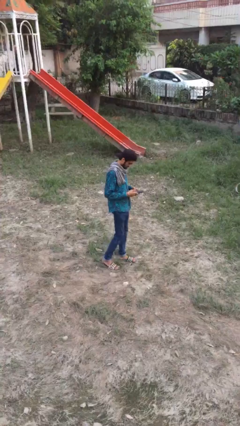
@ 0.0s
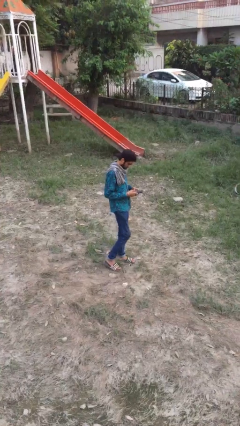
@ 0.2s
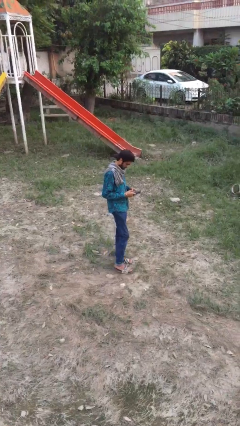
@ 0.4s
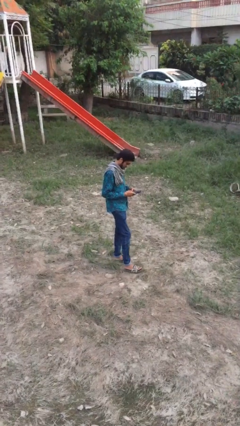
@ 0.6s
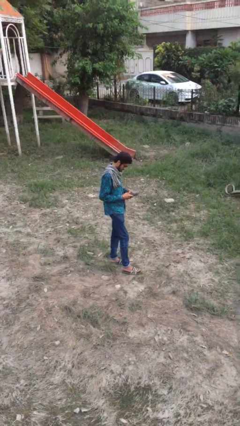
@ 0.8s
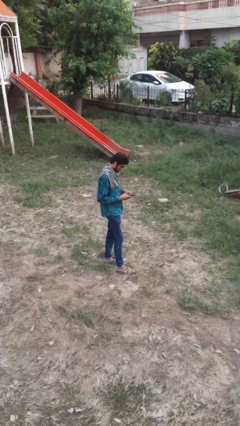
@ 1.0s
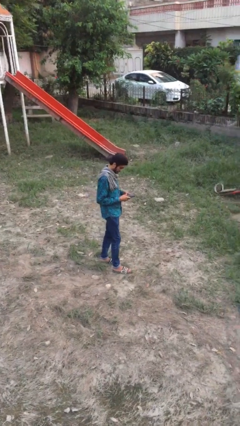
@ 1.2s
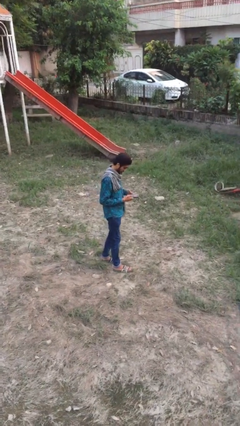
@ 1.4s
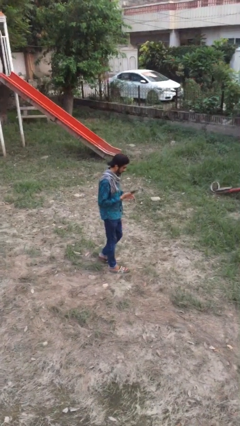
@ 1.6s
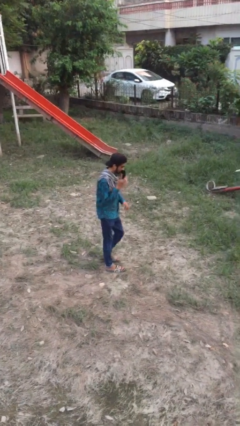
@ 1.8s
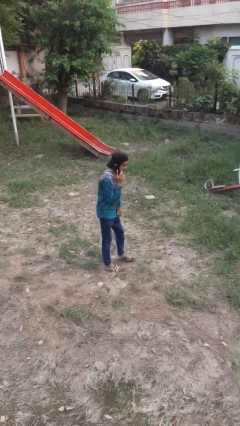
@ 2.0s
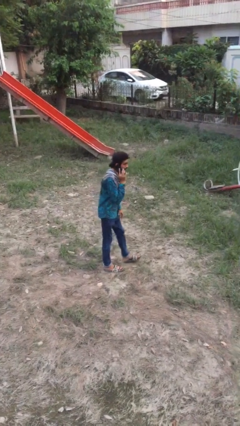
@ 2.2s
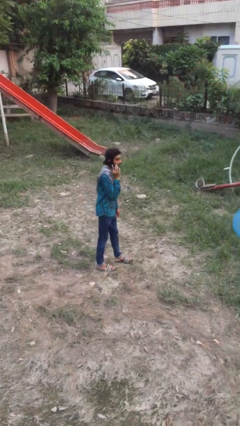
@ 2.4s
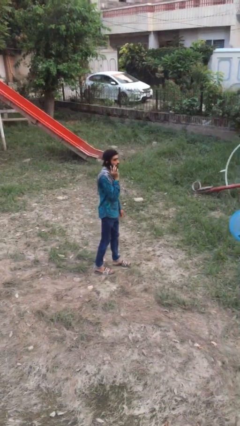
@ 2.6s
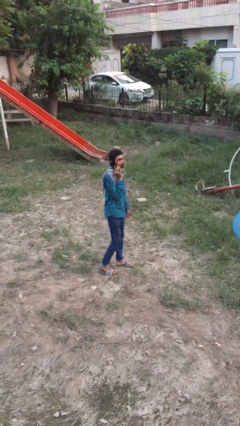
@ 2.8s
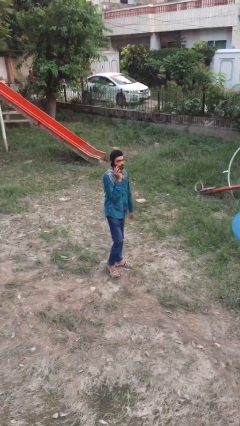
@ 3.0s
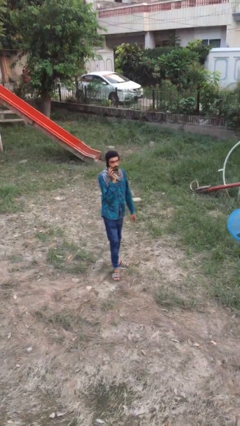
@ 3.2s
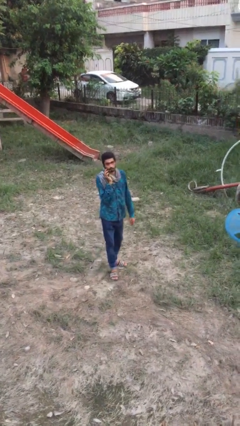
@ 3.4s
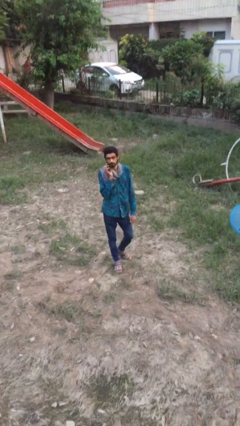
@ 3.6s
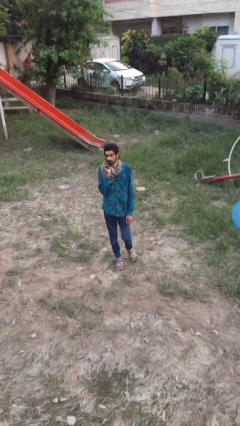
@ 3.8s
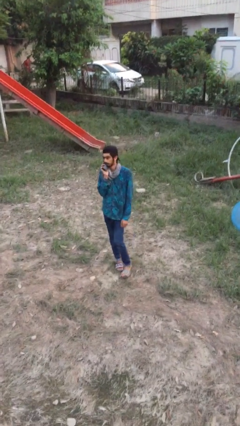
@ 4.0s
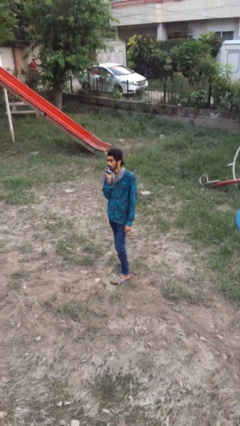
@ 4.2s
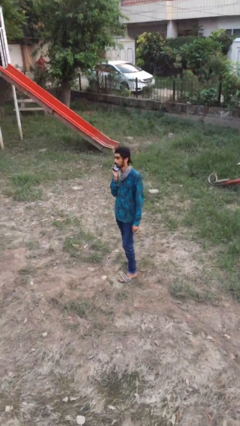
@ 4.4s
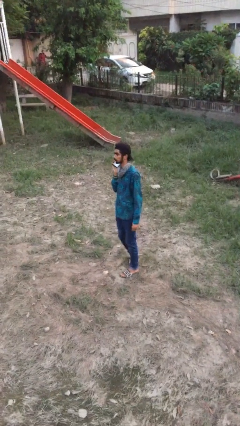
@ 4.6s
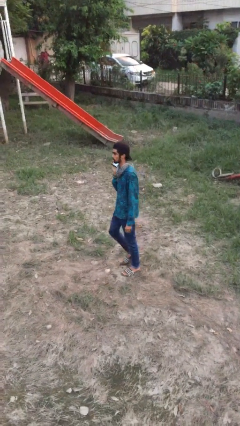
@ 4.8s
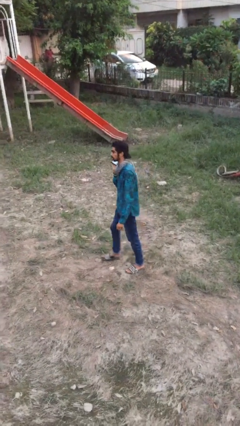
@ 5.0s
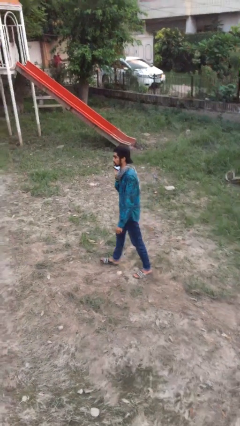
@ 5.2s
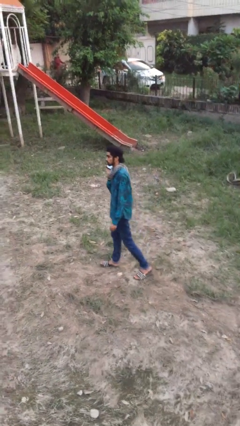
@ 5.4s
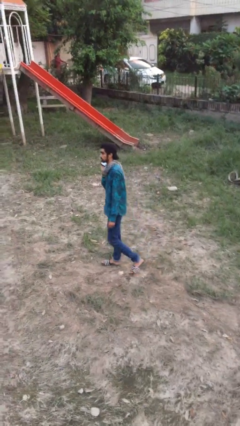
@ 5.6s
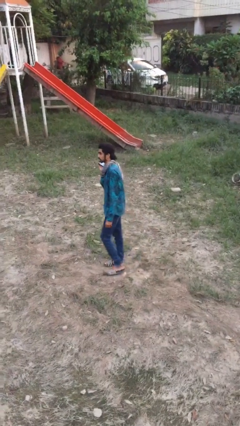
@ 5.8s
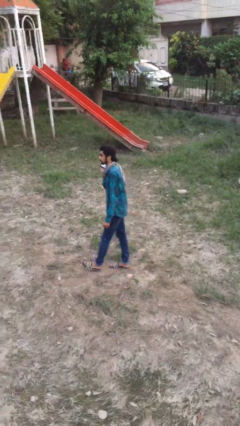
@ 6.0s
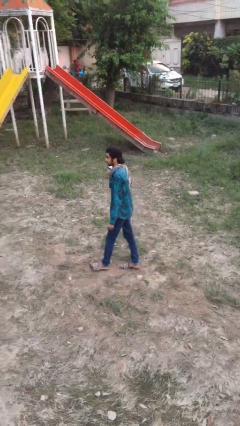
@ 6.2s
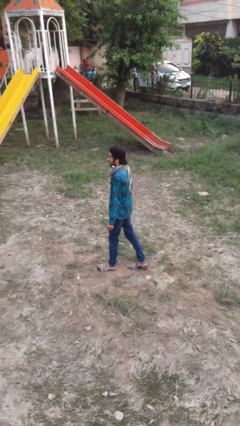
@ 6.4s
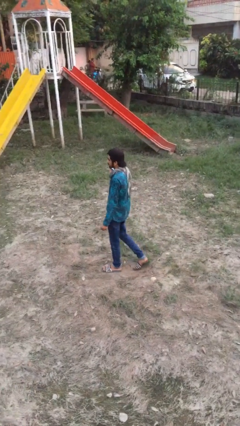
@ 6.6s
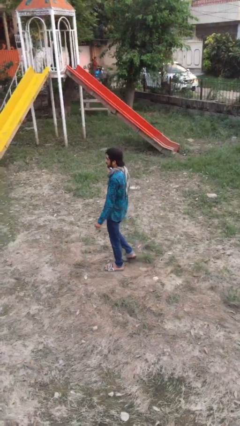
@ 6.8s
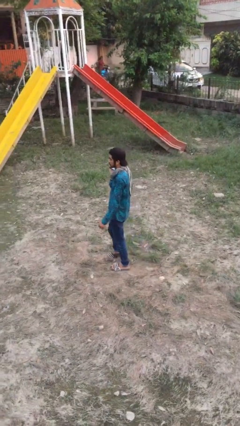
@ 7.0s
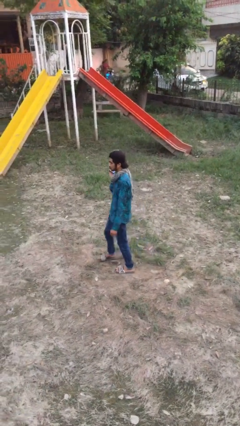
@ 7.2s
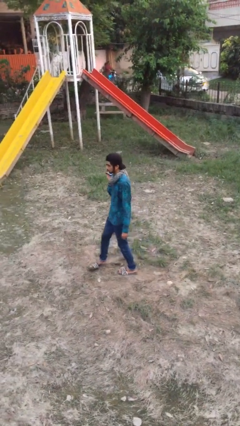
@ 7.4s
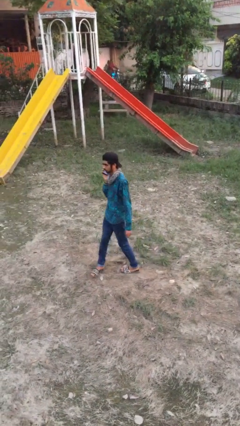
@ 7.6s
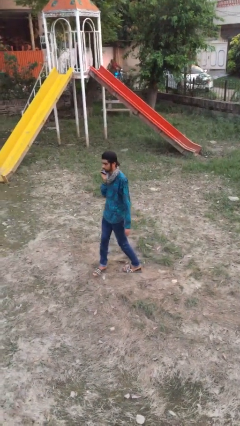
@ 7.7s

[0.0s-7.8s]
person talks on phone

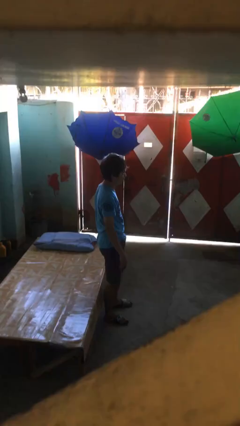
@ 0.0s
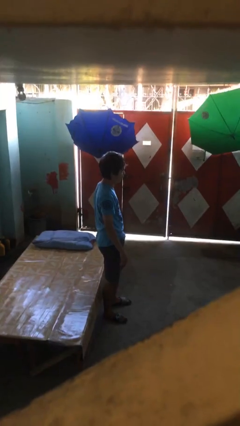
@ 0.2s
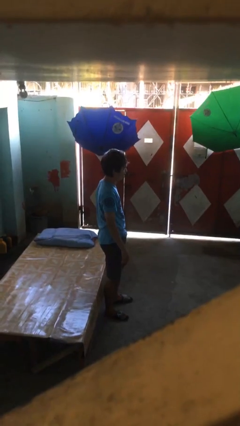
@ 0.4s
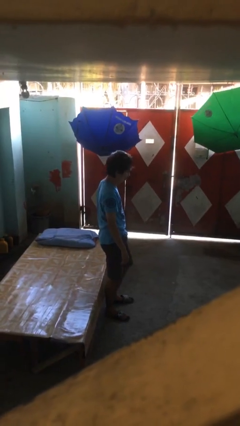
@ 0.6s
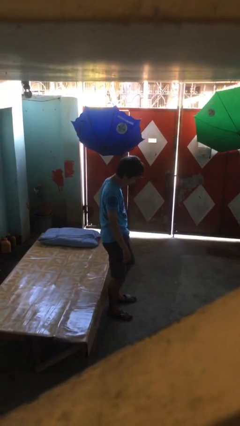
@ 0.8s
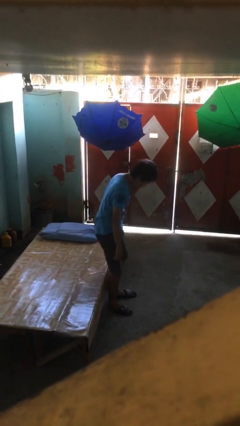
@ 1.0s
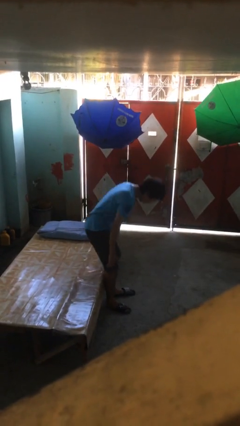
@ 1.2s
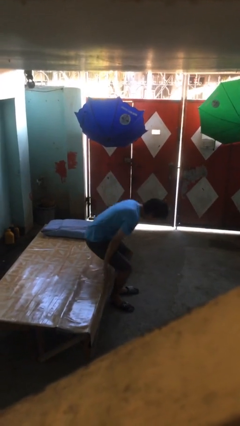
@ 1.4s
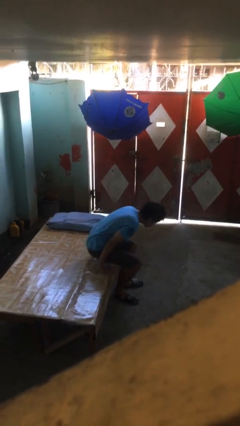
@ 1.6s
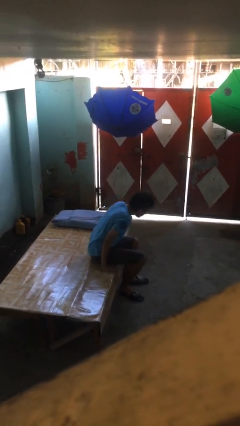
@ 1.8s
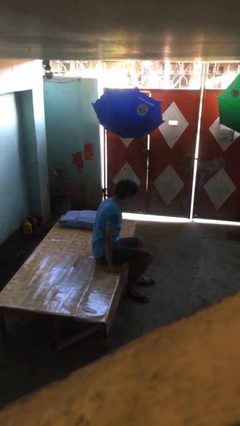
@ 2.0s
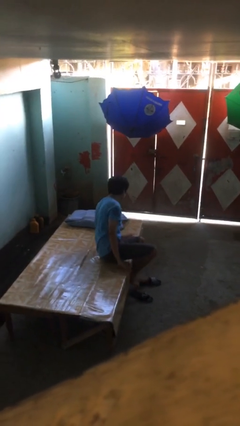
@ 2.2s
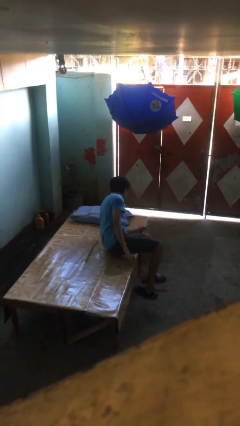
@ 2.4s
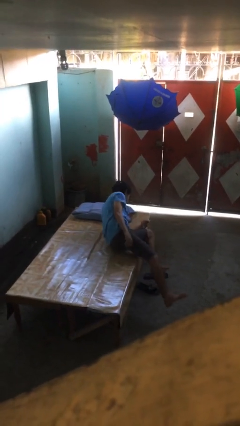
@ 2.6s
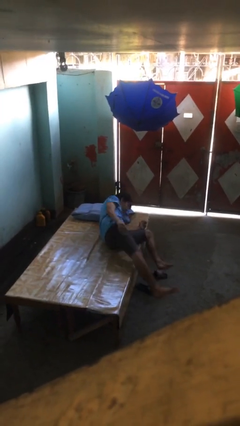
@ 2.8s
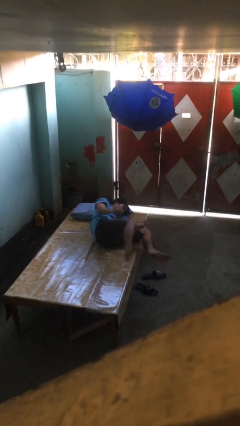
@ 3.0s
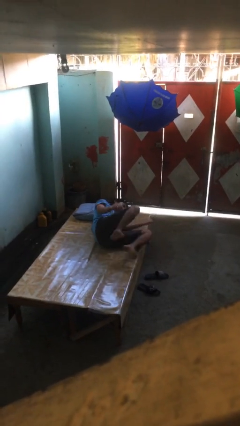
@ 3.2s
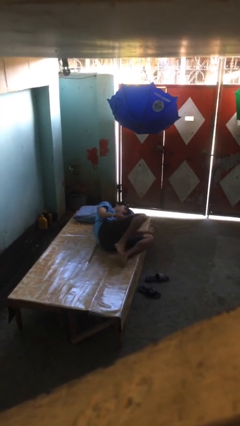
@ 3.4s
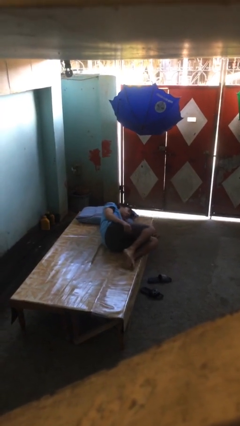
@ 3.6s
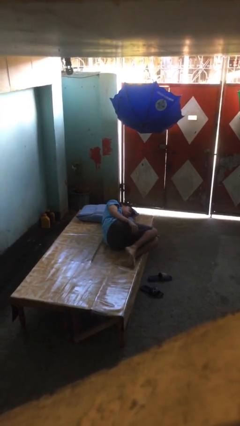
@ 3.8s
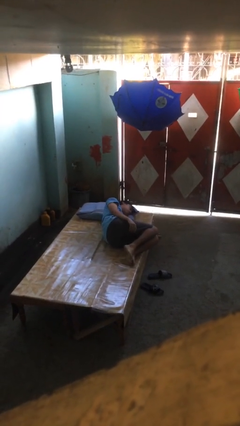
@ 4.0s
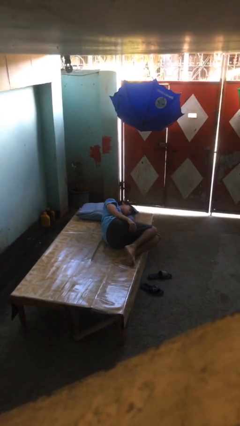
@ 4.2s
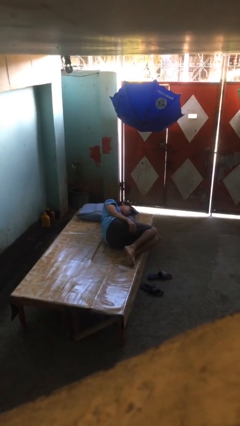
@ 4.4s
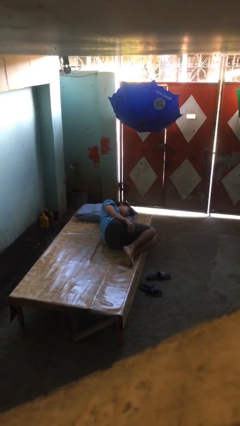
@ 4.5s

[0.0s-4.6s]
person lies down on bed

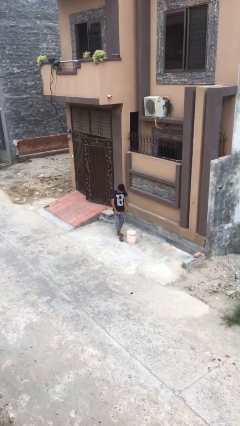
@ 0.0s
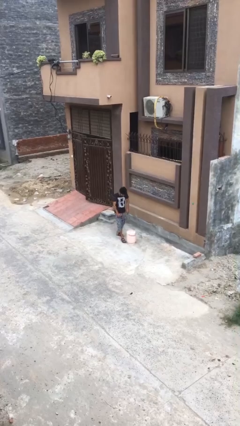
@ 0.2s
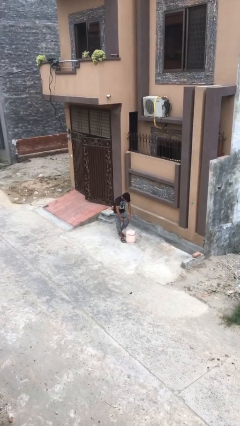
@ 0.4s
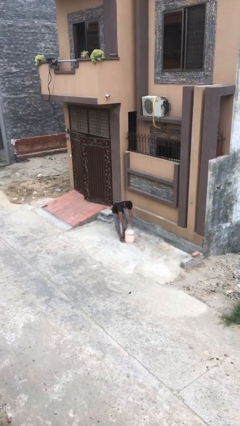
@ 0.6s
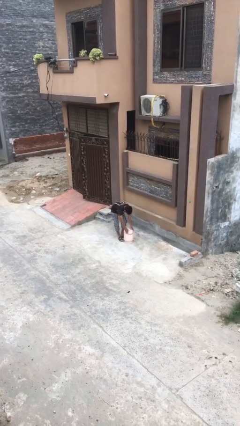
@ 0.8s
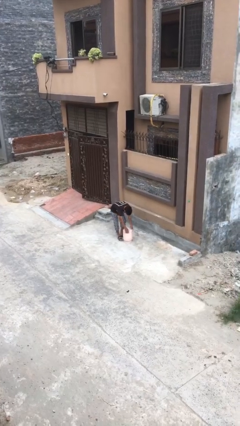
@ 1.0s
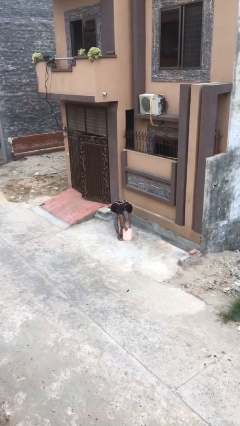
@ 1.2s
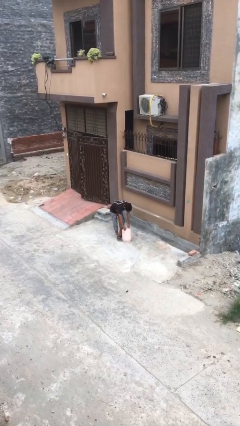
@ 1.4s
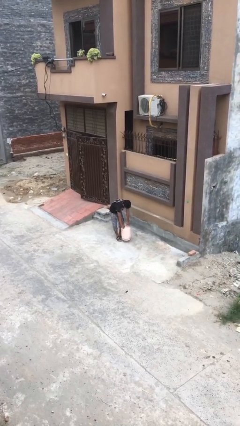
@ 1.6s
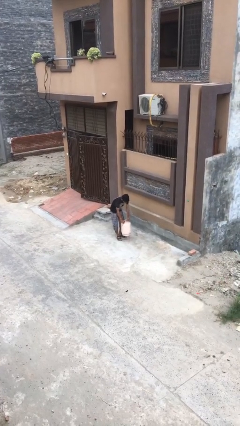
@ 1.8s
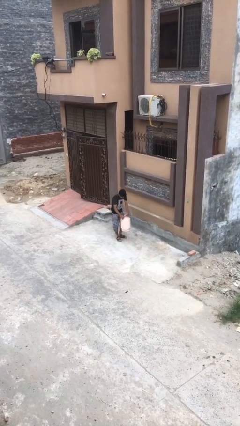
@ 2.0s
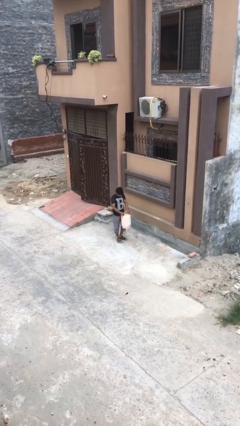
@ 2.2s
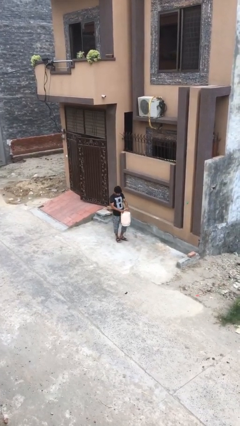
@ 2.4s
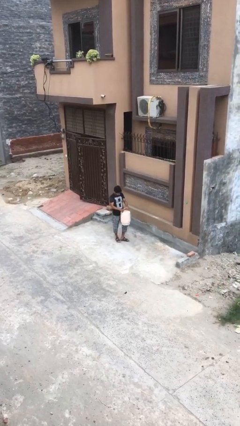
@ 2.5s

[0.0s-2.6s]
person picks up object from floor

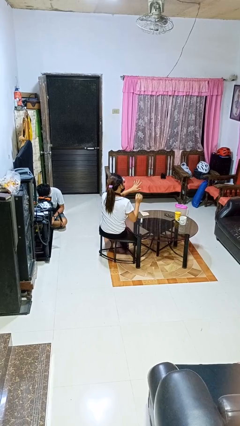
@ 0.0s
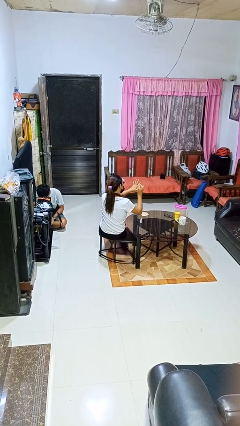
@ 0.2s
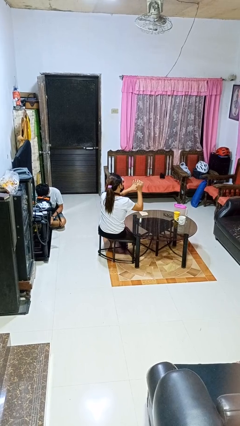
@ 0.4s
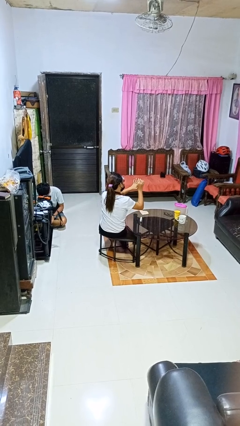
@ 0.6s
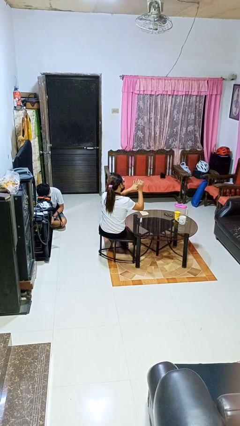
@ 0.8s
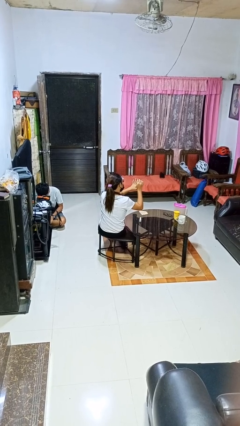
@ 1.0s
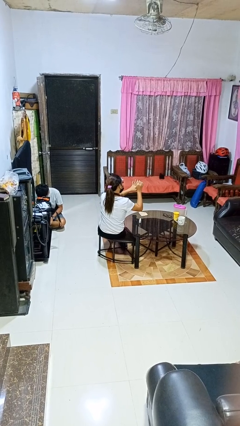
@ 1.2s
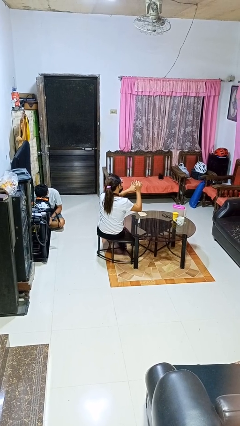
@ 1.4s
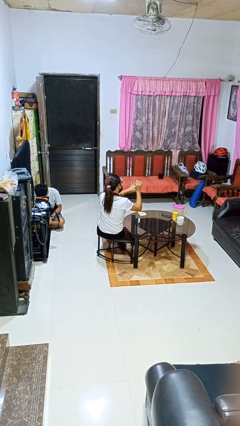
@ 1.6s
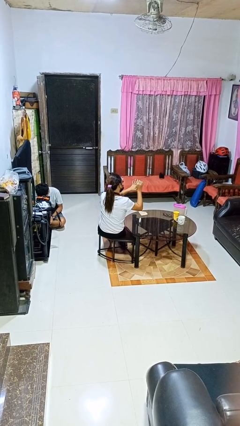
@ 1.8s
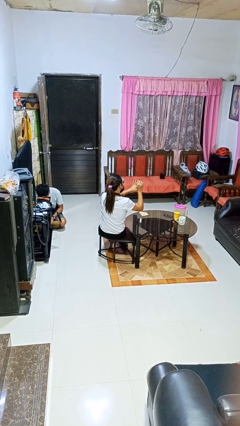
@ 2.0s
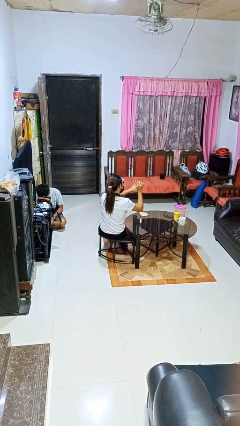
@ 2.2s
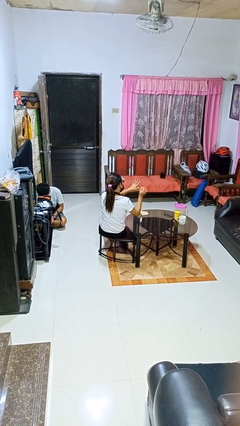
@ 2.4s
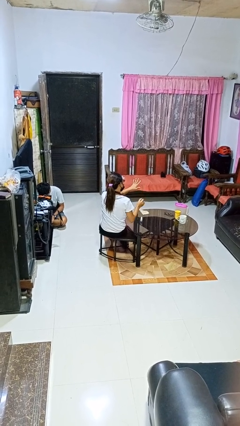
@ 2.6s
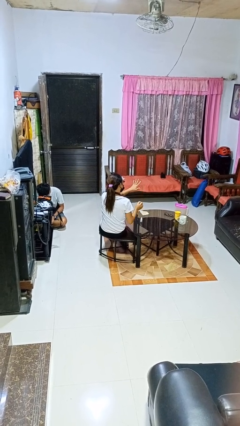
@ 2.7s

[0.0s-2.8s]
person paints fingernails

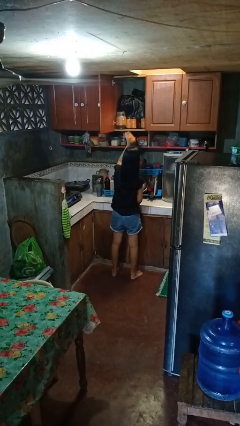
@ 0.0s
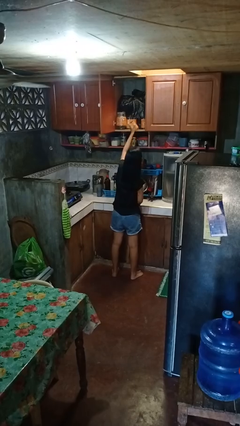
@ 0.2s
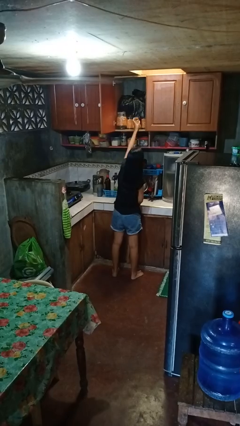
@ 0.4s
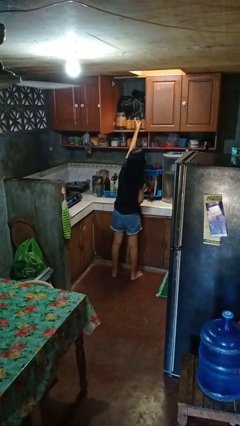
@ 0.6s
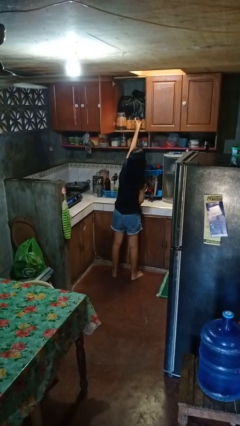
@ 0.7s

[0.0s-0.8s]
person puts down object into cabinet
